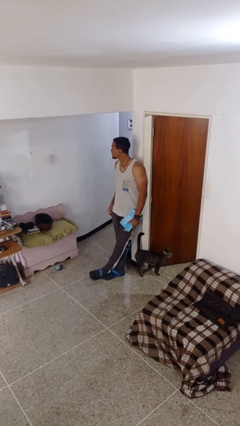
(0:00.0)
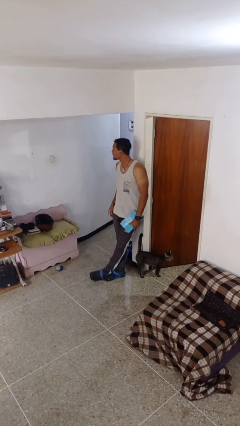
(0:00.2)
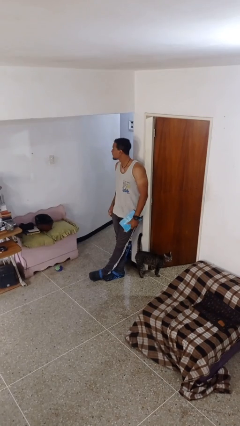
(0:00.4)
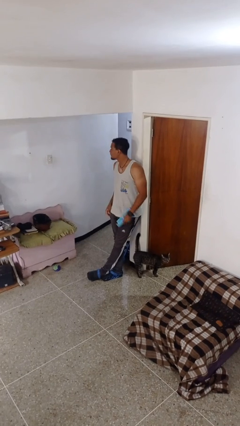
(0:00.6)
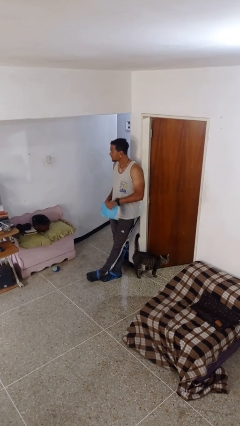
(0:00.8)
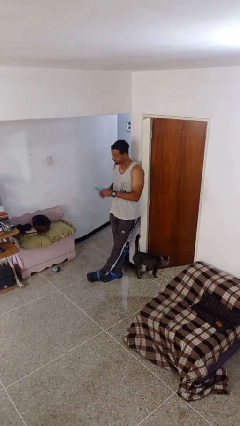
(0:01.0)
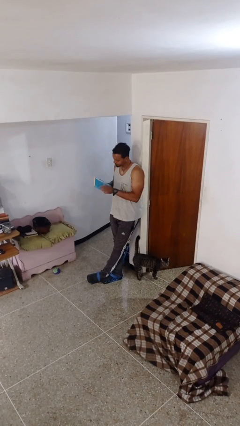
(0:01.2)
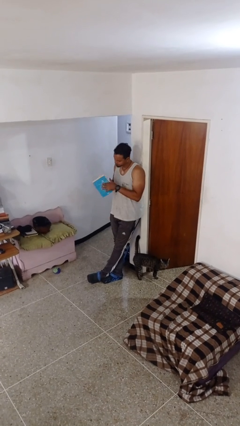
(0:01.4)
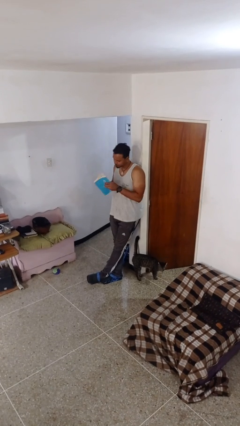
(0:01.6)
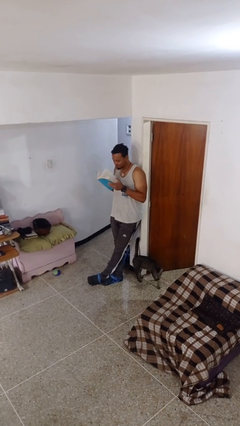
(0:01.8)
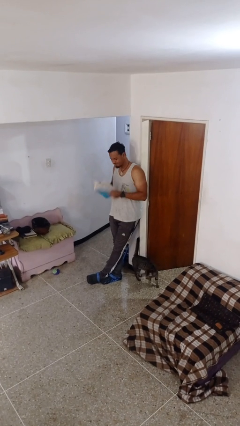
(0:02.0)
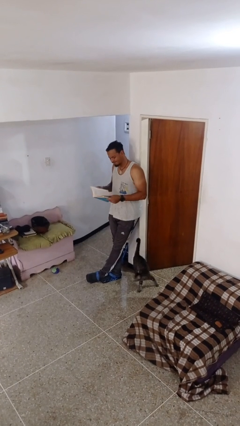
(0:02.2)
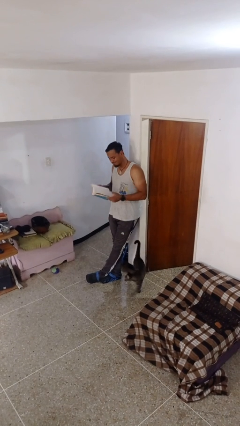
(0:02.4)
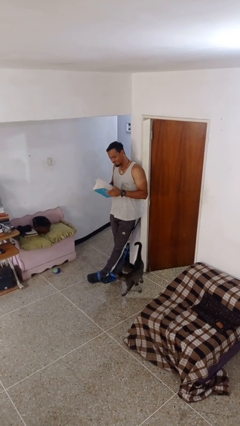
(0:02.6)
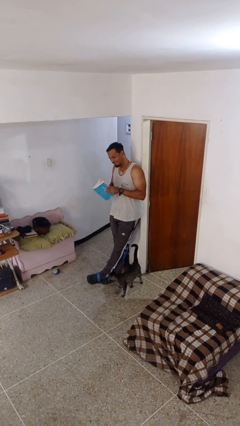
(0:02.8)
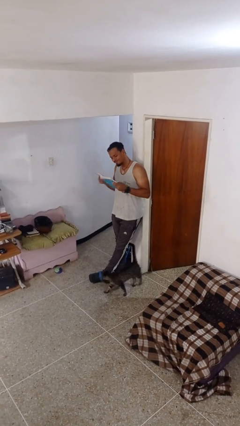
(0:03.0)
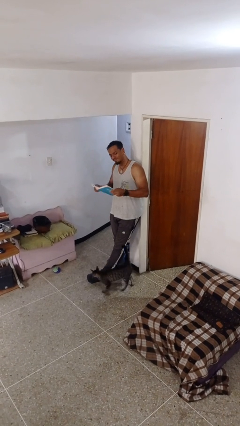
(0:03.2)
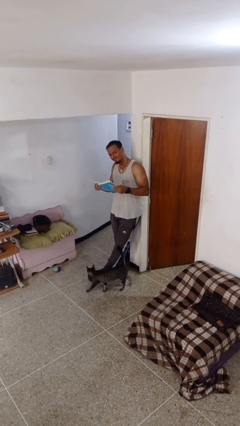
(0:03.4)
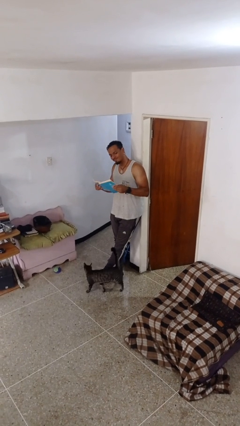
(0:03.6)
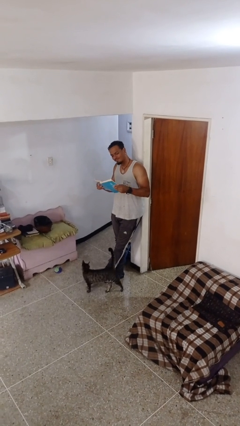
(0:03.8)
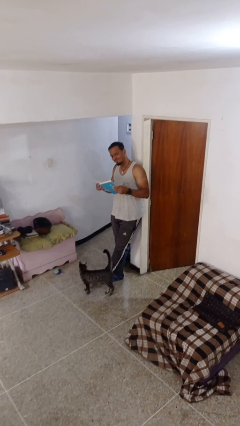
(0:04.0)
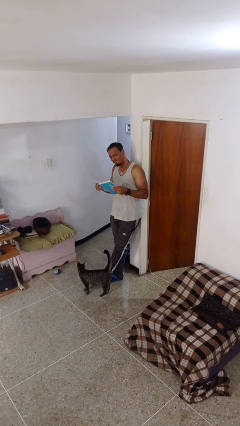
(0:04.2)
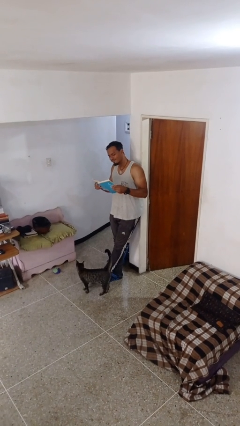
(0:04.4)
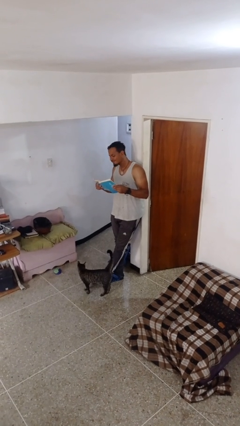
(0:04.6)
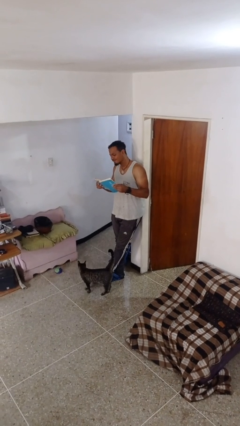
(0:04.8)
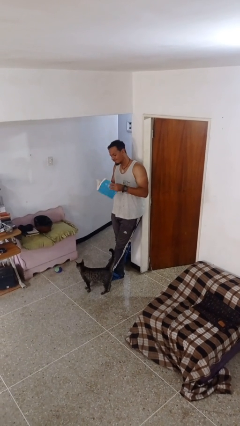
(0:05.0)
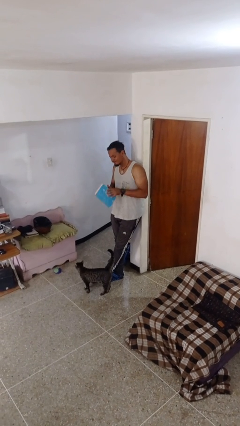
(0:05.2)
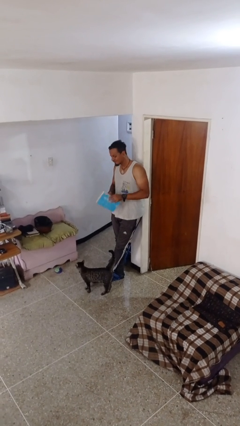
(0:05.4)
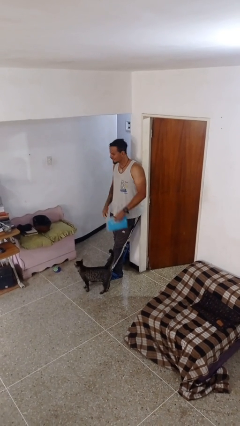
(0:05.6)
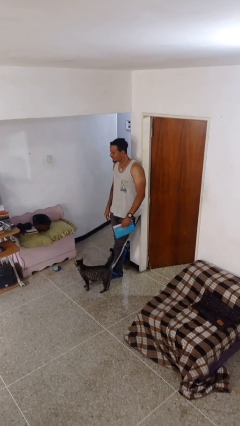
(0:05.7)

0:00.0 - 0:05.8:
person reads book

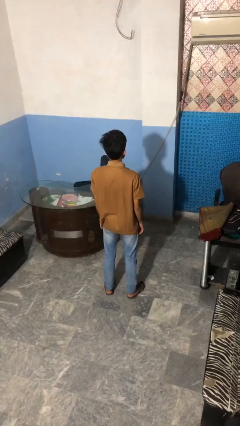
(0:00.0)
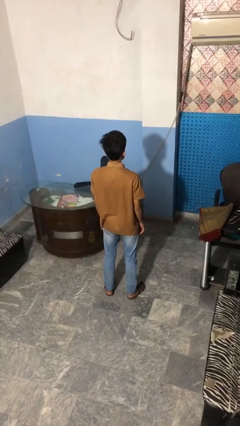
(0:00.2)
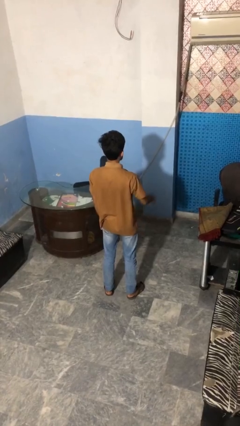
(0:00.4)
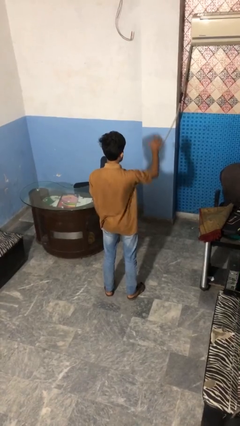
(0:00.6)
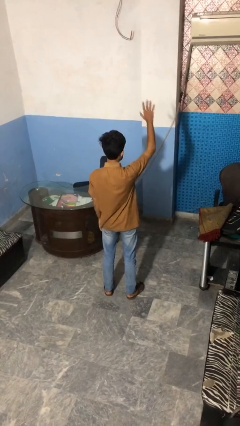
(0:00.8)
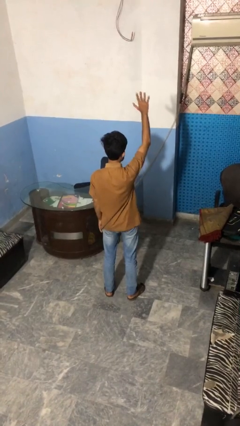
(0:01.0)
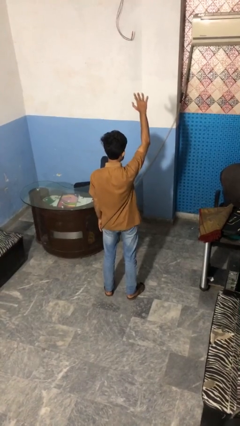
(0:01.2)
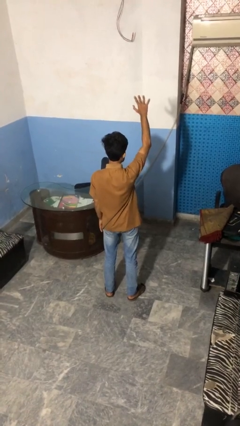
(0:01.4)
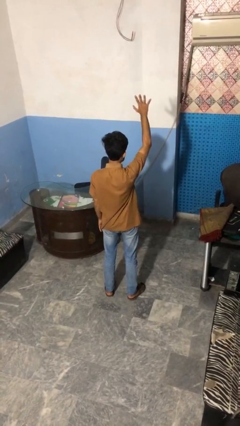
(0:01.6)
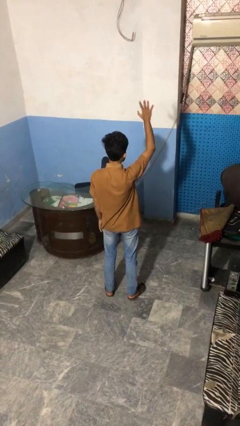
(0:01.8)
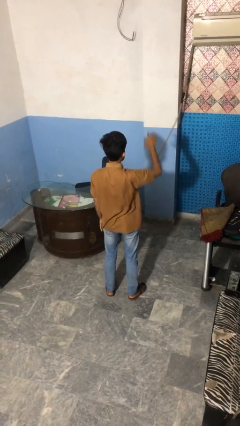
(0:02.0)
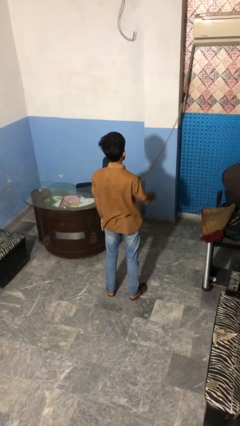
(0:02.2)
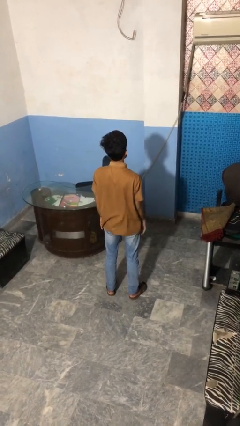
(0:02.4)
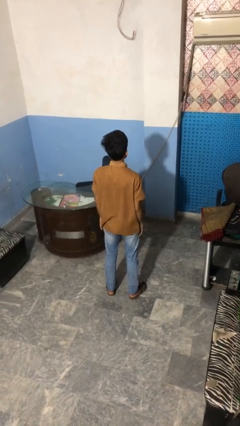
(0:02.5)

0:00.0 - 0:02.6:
person gestures number five

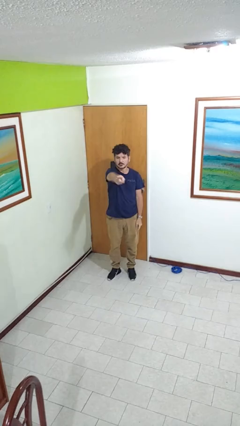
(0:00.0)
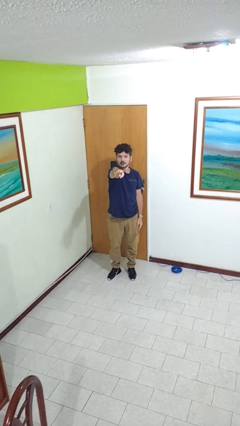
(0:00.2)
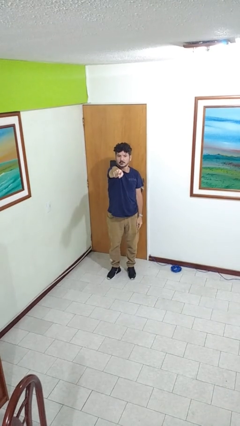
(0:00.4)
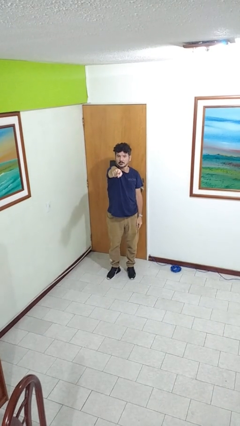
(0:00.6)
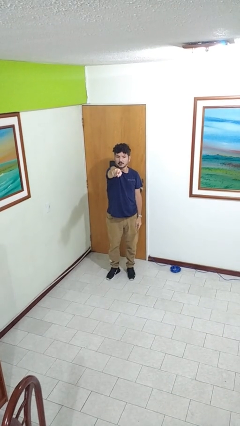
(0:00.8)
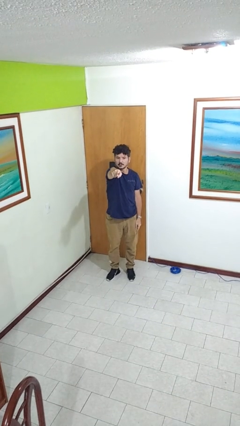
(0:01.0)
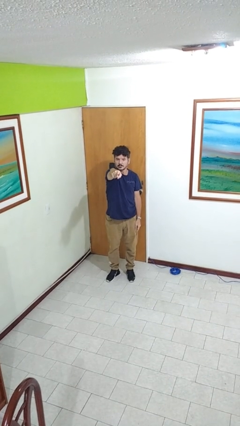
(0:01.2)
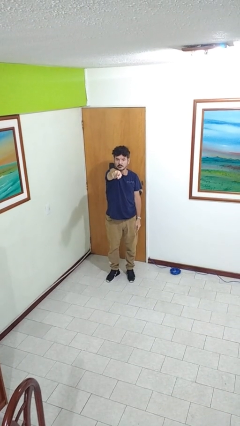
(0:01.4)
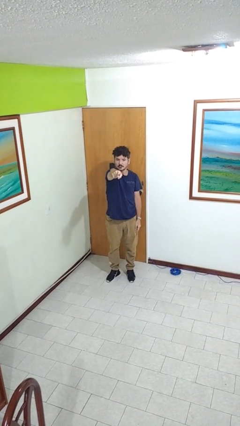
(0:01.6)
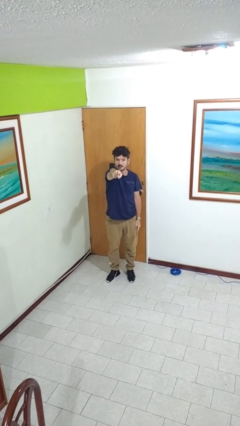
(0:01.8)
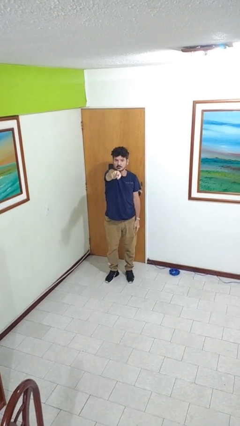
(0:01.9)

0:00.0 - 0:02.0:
person points at person

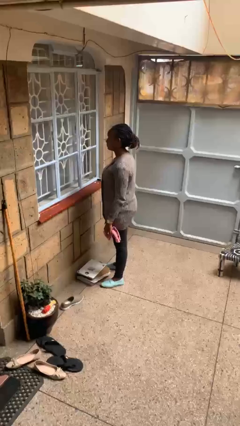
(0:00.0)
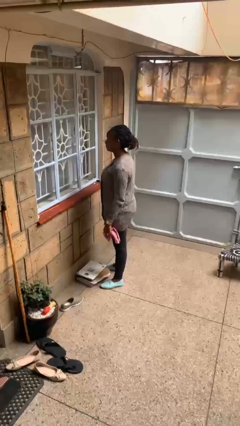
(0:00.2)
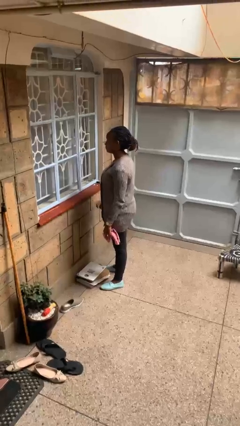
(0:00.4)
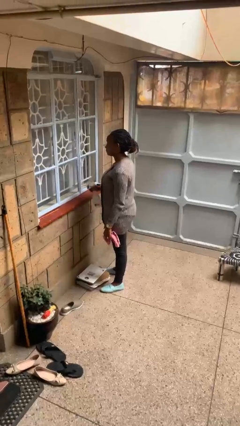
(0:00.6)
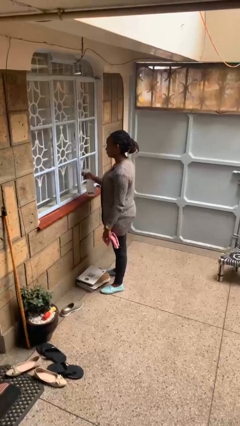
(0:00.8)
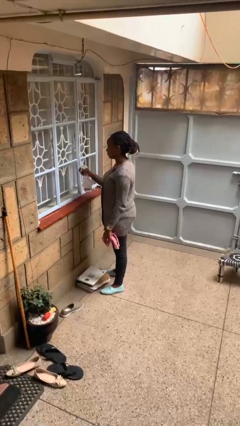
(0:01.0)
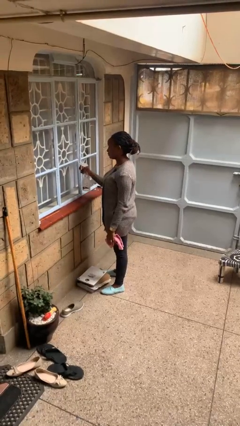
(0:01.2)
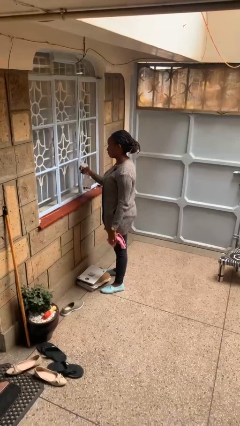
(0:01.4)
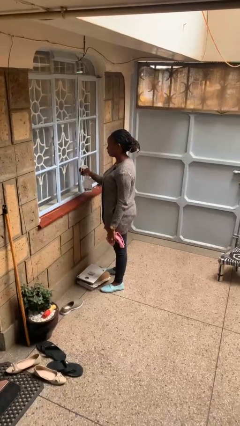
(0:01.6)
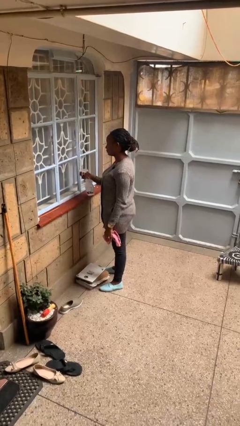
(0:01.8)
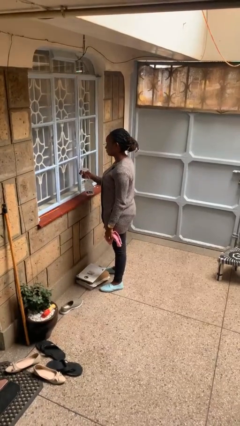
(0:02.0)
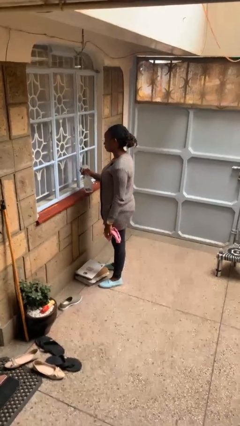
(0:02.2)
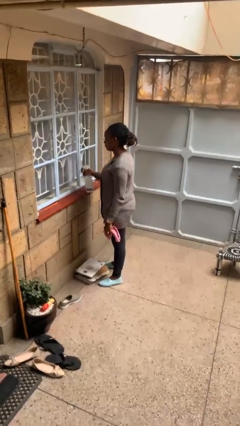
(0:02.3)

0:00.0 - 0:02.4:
person sprays from bottle

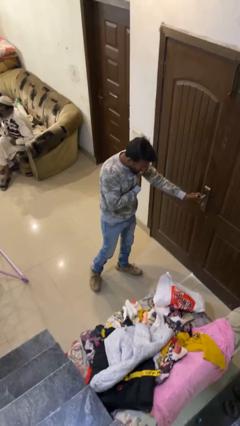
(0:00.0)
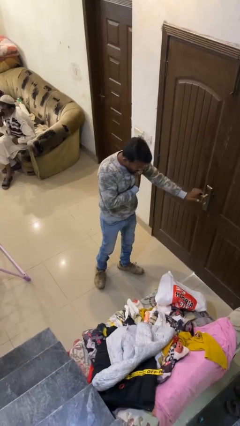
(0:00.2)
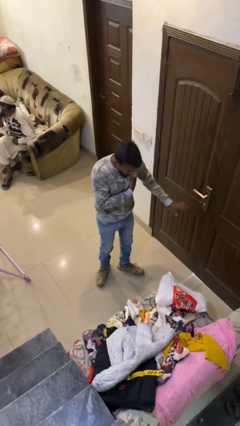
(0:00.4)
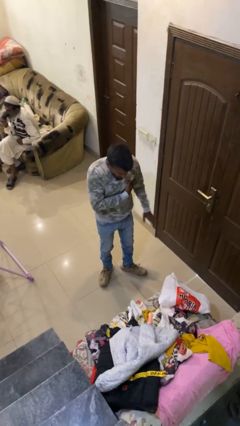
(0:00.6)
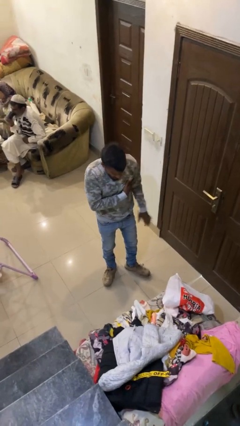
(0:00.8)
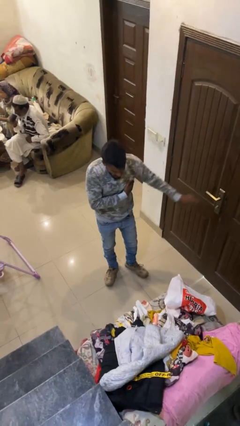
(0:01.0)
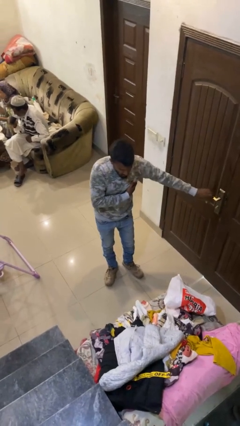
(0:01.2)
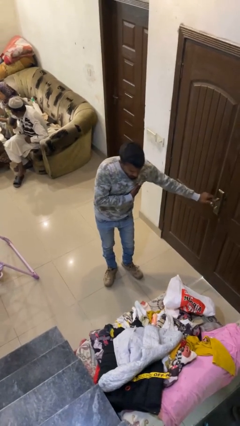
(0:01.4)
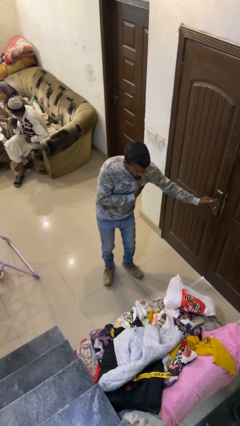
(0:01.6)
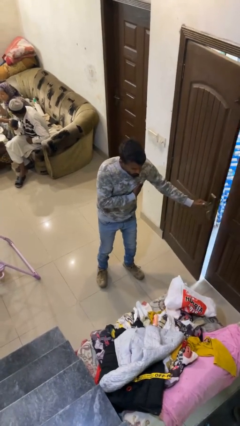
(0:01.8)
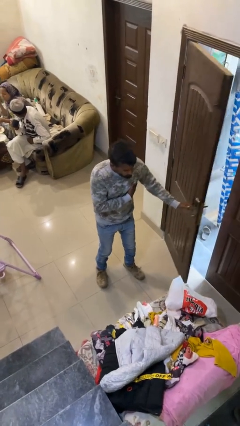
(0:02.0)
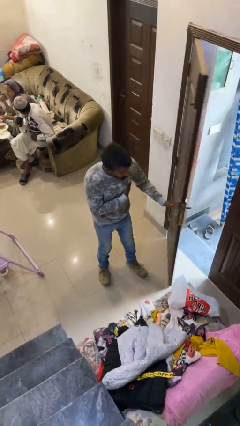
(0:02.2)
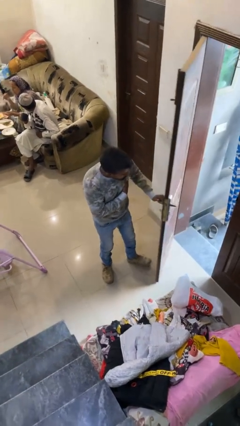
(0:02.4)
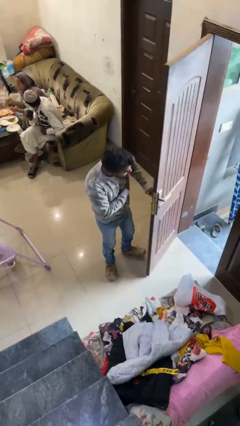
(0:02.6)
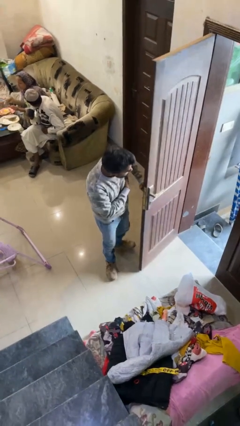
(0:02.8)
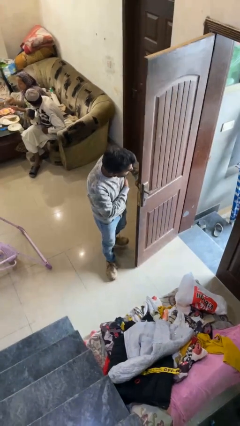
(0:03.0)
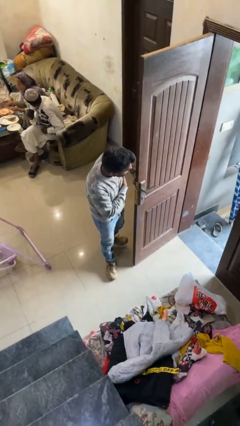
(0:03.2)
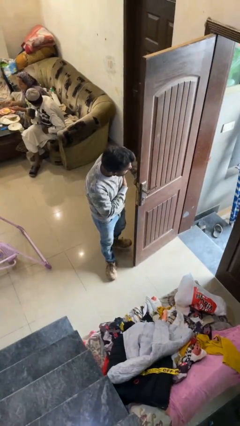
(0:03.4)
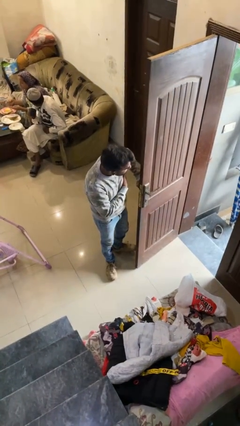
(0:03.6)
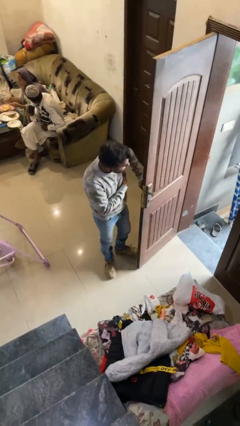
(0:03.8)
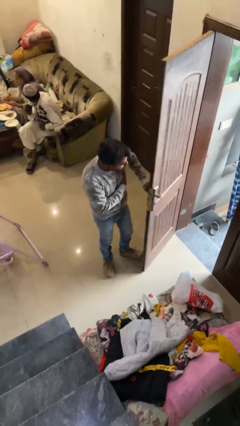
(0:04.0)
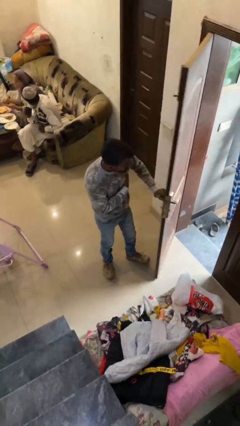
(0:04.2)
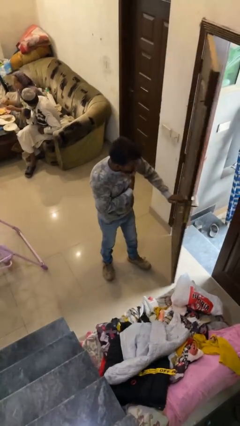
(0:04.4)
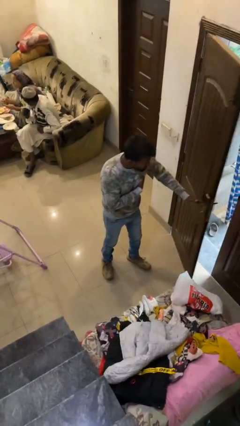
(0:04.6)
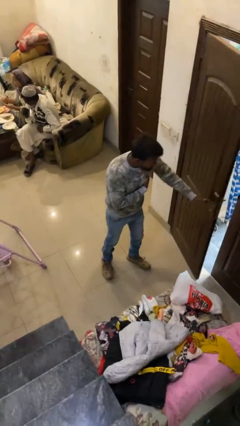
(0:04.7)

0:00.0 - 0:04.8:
person opens facility door
